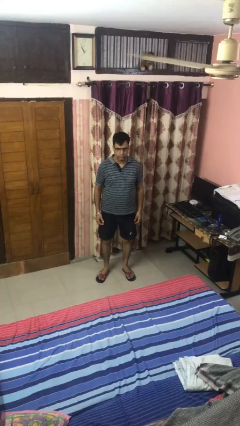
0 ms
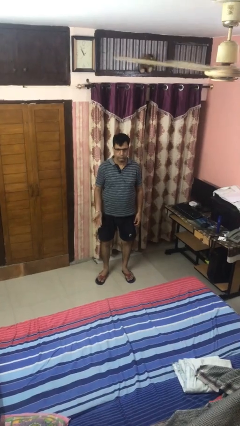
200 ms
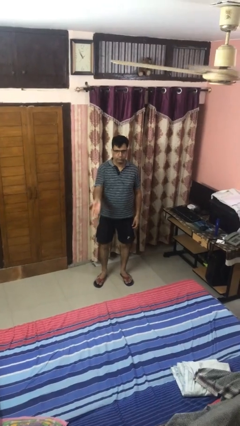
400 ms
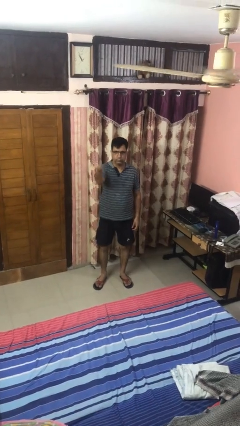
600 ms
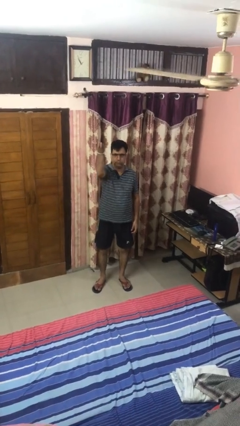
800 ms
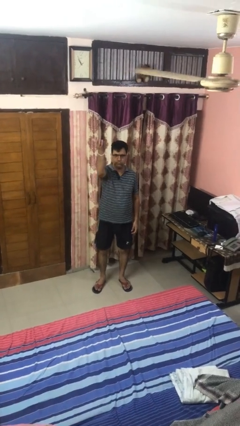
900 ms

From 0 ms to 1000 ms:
person gestures swipe up

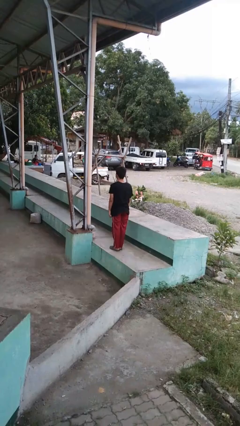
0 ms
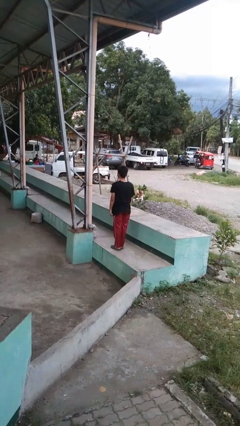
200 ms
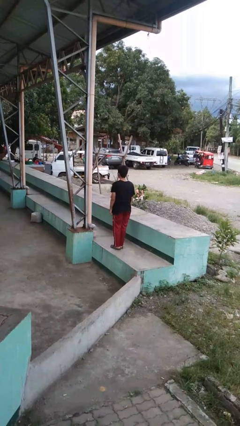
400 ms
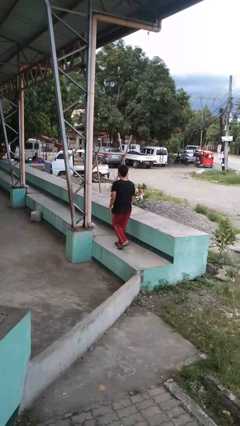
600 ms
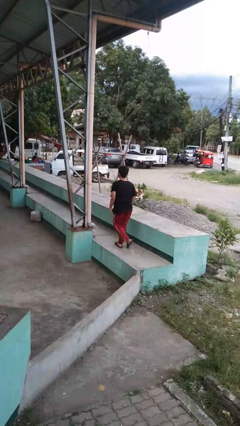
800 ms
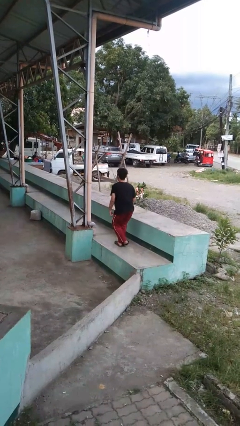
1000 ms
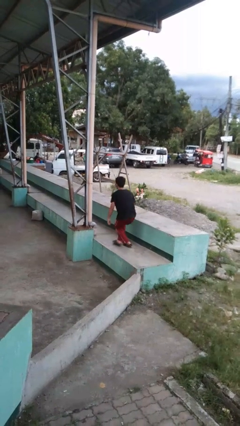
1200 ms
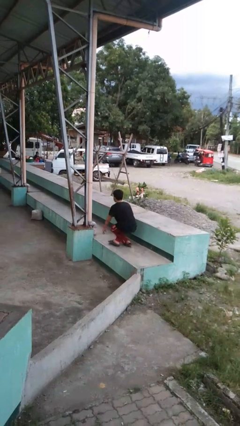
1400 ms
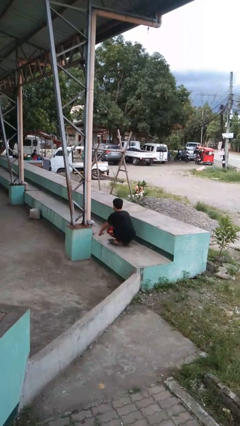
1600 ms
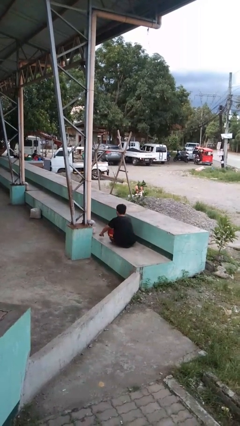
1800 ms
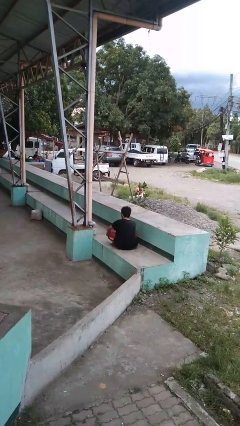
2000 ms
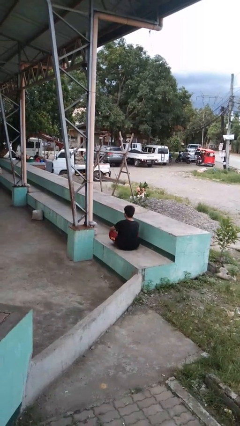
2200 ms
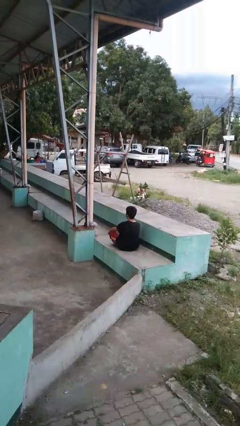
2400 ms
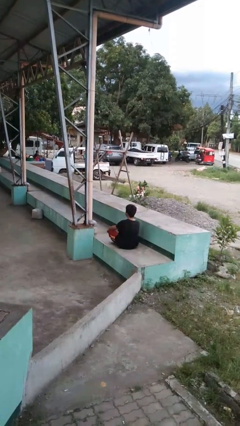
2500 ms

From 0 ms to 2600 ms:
person sits crisscross

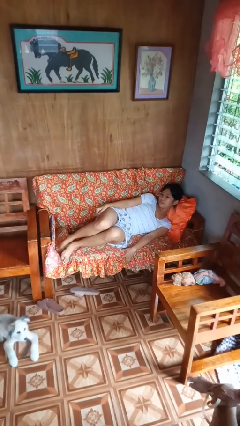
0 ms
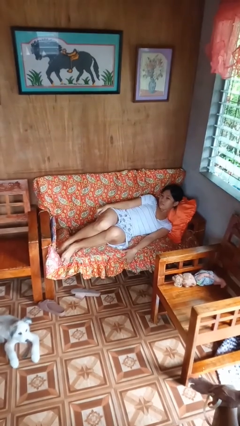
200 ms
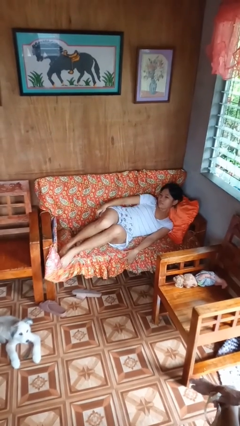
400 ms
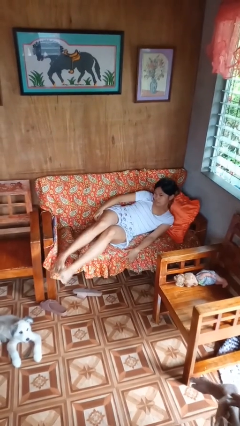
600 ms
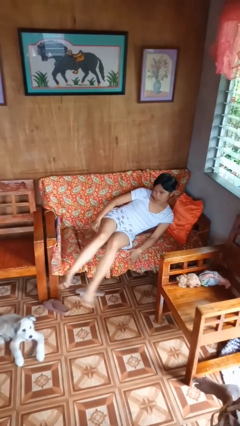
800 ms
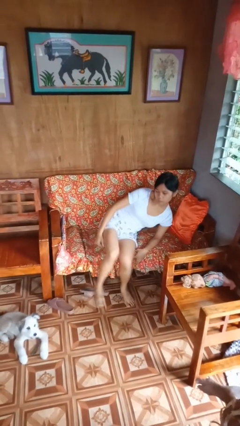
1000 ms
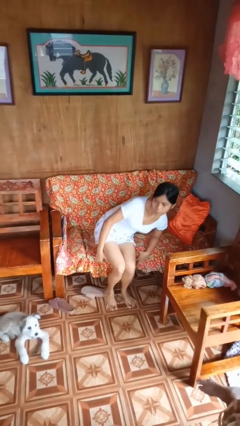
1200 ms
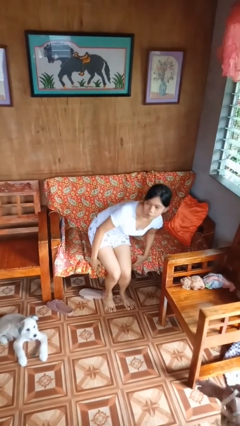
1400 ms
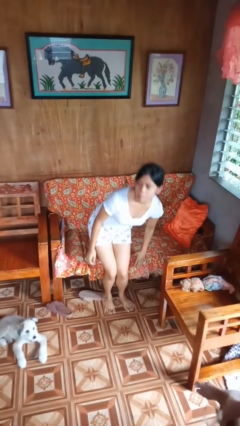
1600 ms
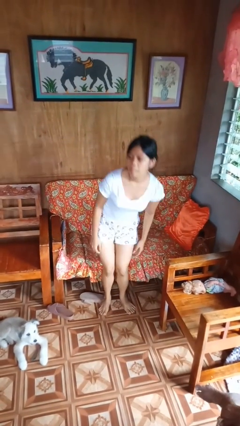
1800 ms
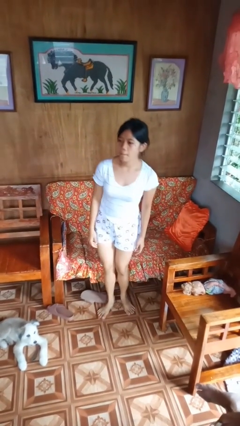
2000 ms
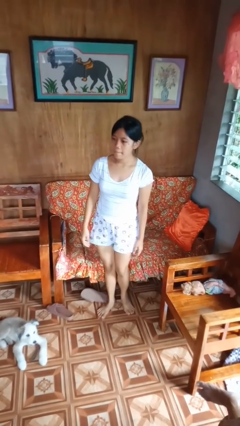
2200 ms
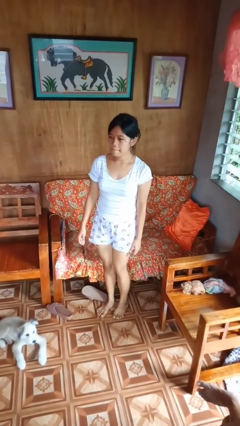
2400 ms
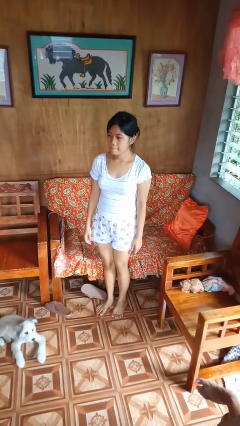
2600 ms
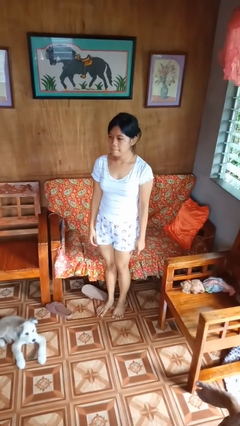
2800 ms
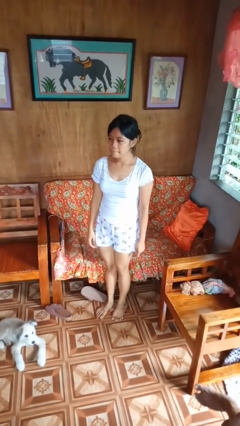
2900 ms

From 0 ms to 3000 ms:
person stands up

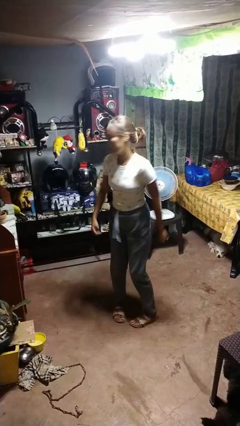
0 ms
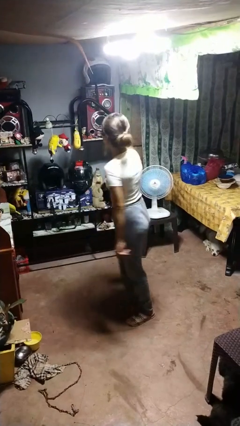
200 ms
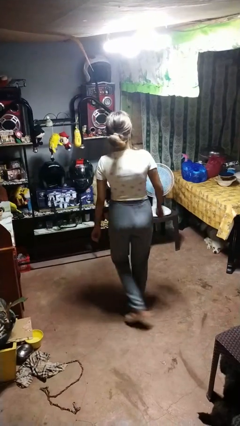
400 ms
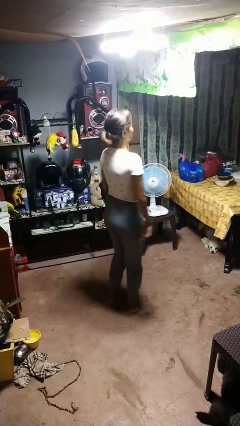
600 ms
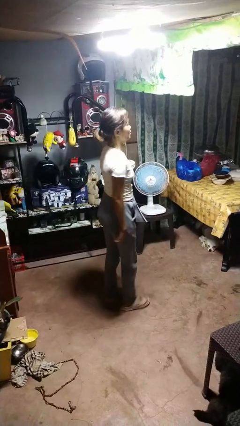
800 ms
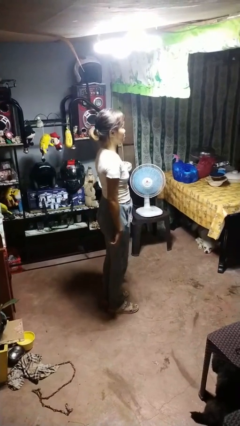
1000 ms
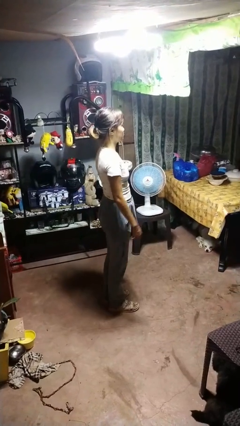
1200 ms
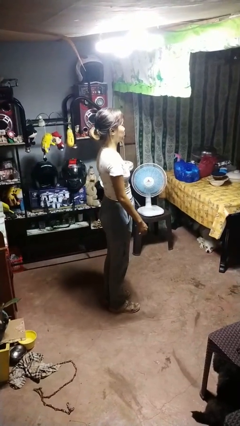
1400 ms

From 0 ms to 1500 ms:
person twirls

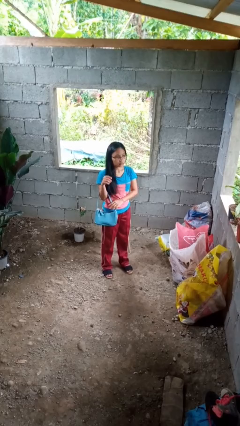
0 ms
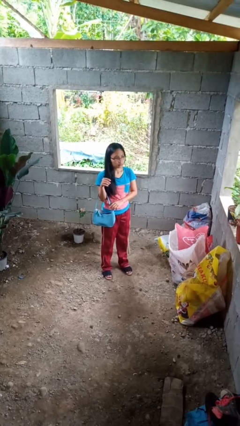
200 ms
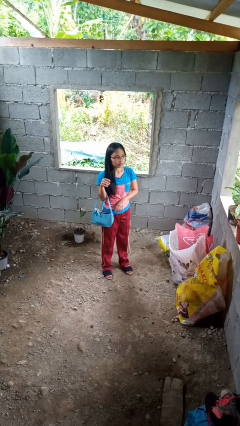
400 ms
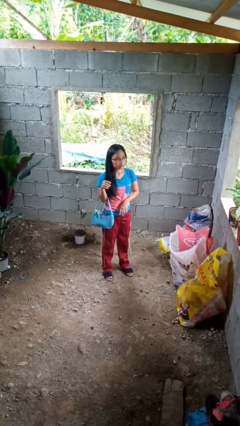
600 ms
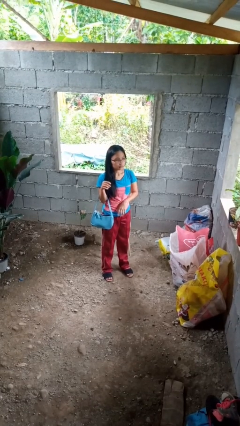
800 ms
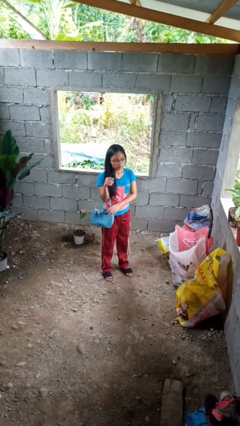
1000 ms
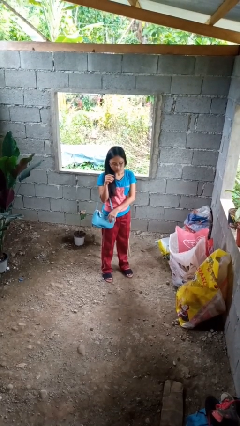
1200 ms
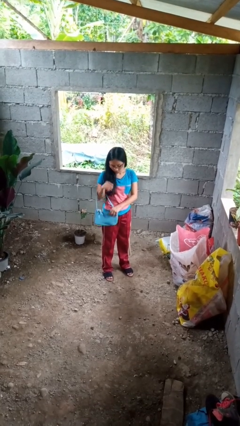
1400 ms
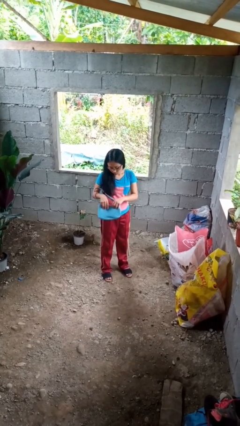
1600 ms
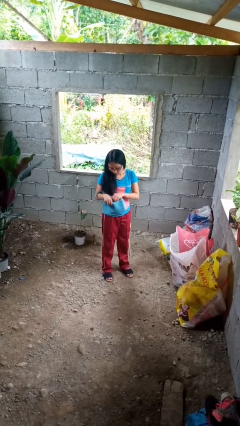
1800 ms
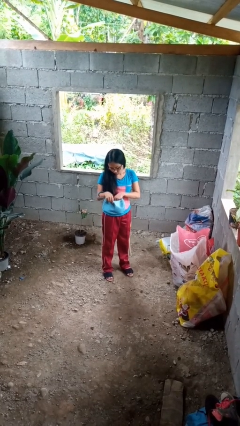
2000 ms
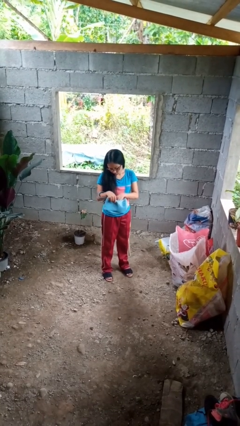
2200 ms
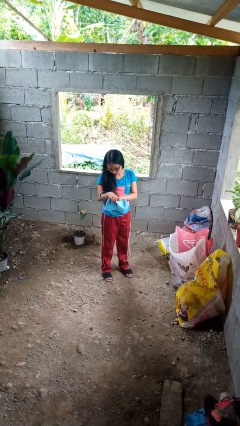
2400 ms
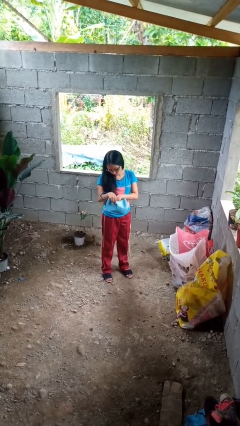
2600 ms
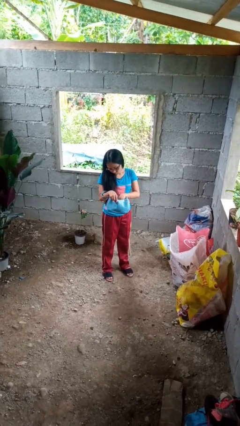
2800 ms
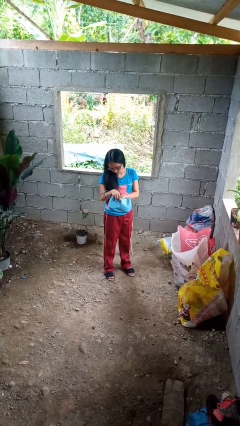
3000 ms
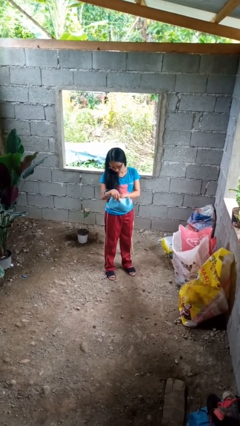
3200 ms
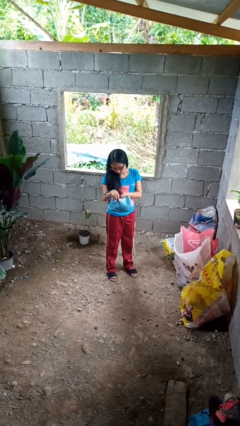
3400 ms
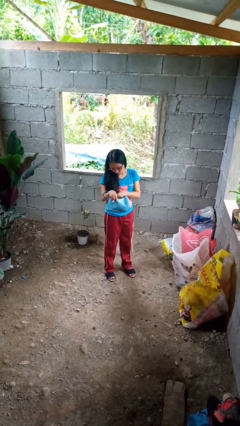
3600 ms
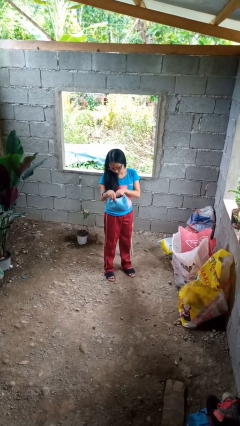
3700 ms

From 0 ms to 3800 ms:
person searches in purse

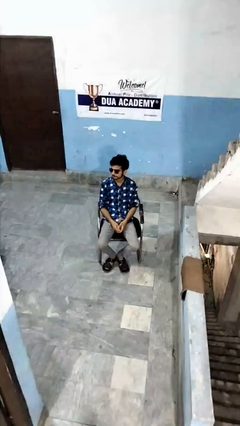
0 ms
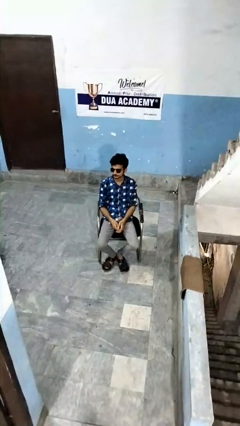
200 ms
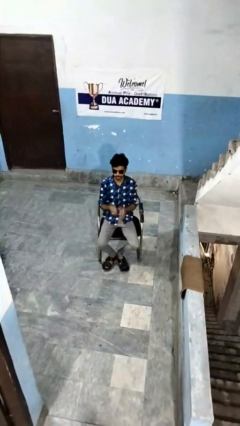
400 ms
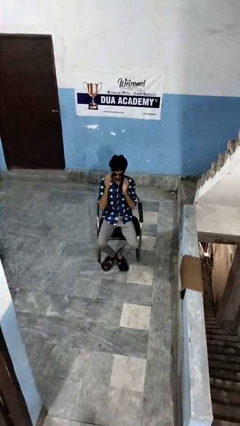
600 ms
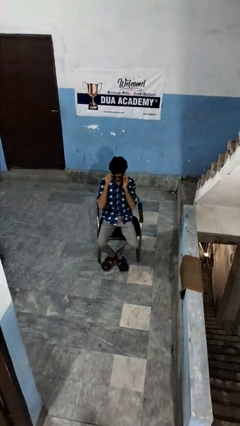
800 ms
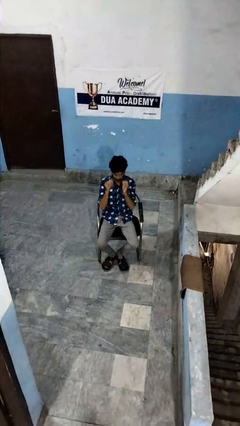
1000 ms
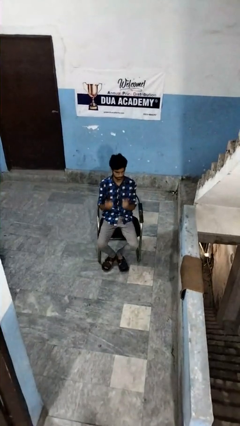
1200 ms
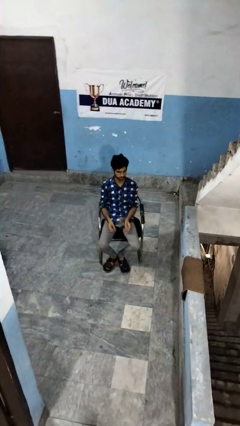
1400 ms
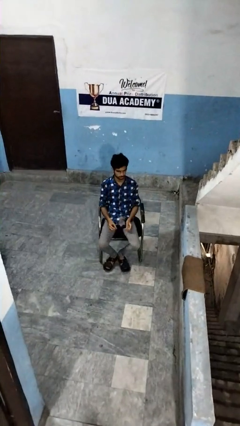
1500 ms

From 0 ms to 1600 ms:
person takes off sunglasses

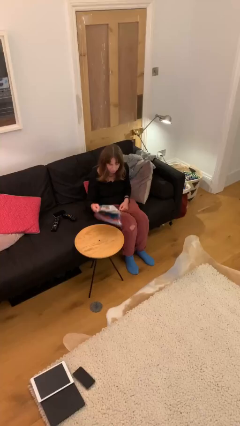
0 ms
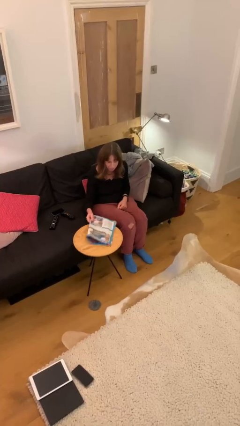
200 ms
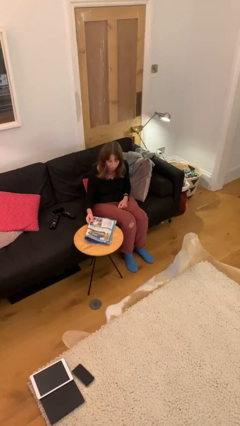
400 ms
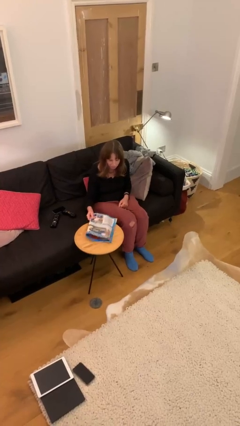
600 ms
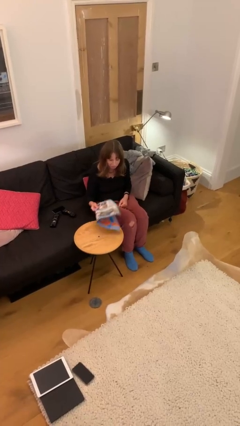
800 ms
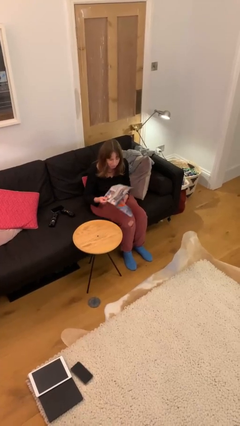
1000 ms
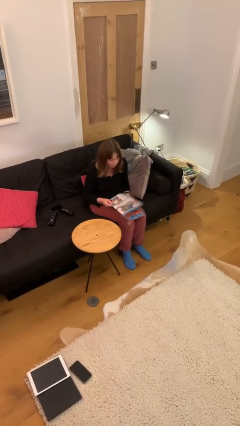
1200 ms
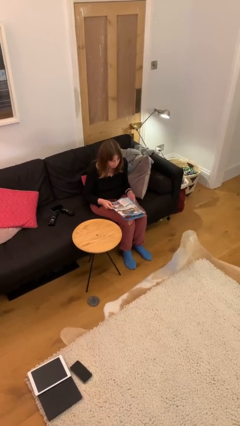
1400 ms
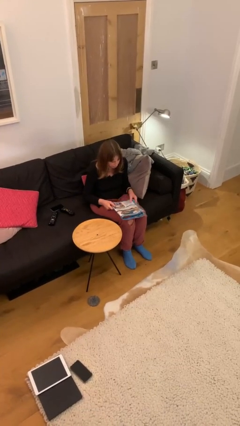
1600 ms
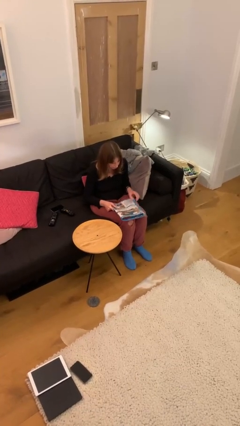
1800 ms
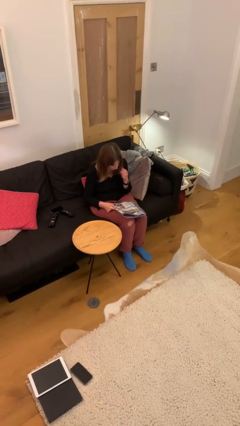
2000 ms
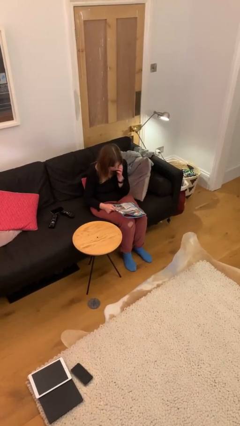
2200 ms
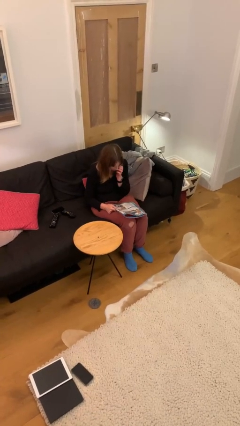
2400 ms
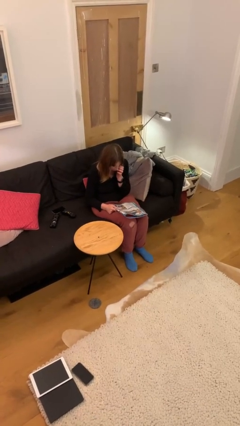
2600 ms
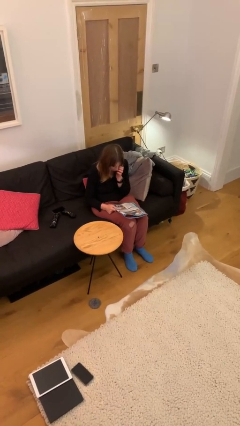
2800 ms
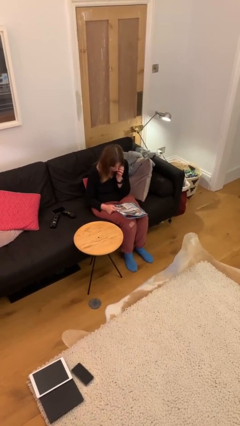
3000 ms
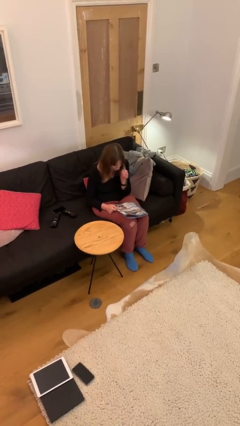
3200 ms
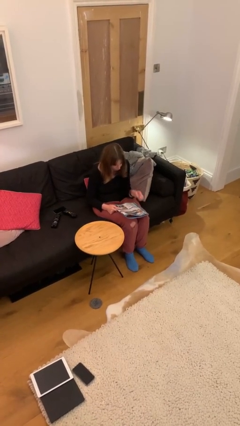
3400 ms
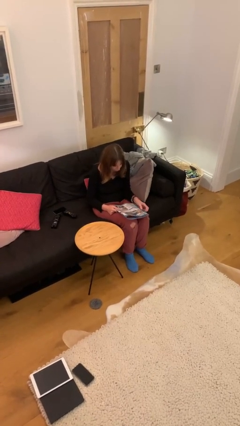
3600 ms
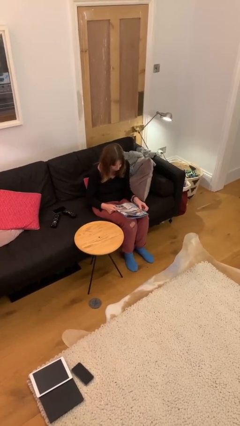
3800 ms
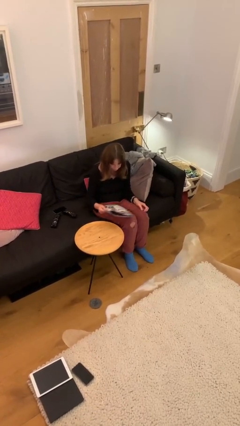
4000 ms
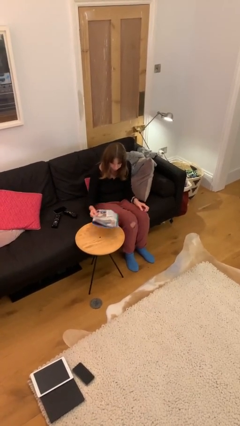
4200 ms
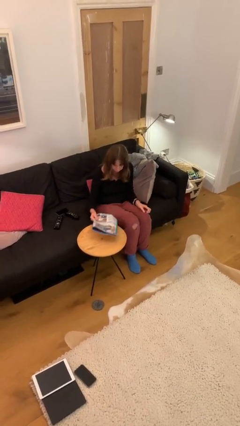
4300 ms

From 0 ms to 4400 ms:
person reads document
